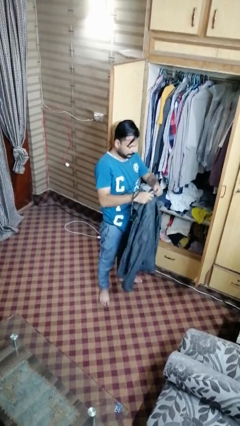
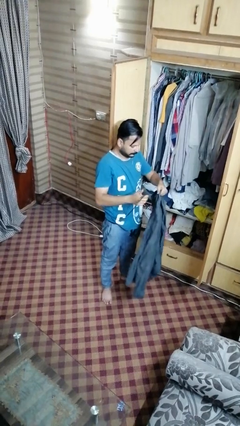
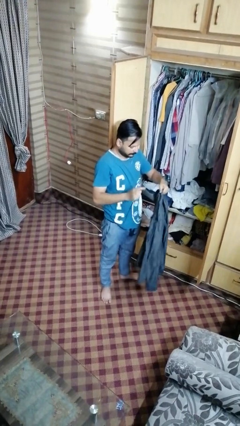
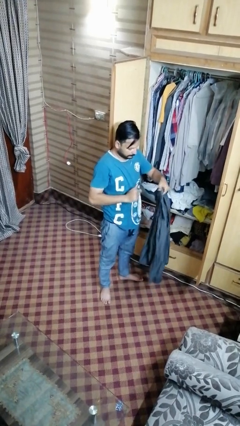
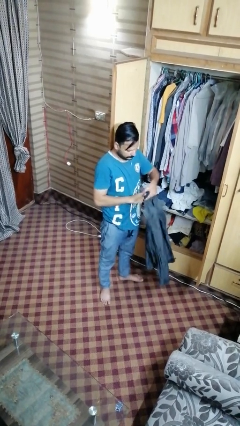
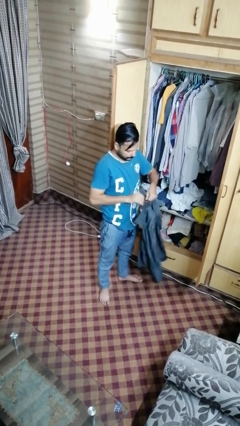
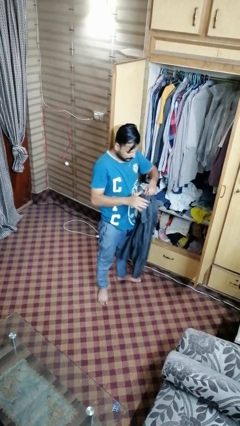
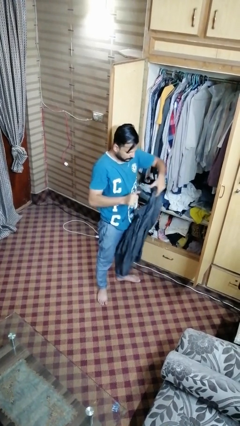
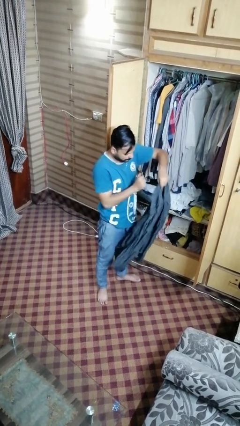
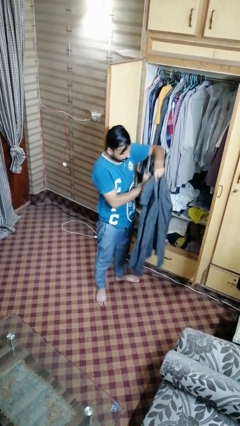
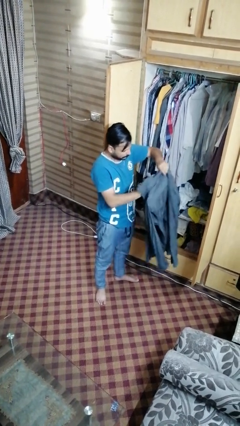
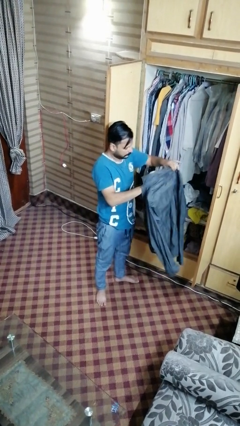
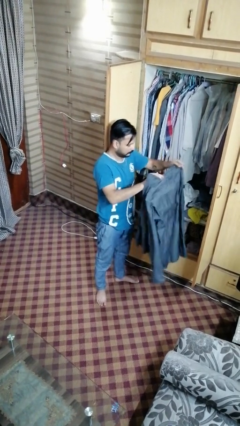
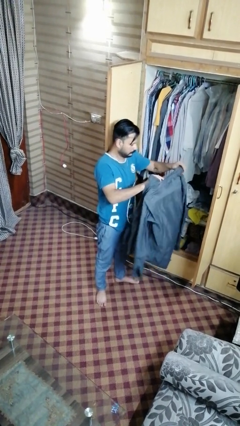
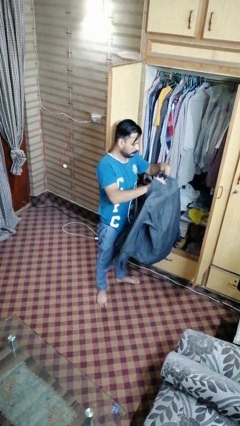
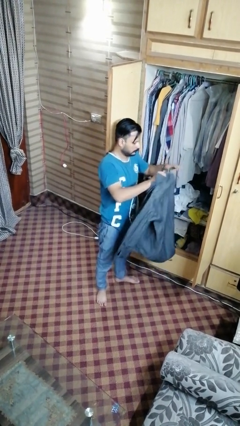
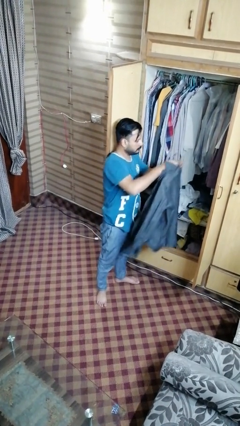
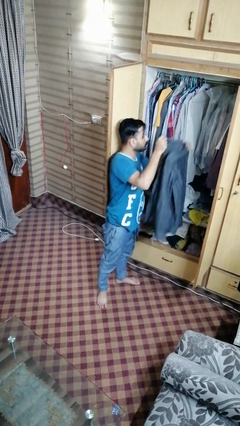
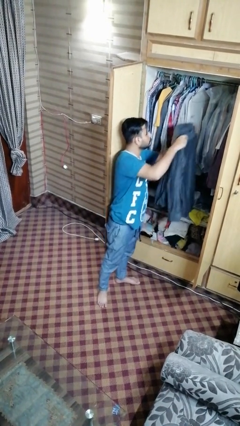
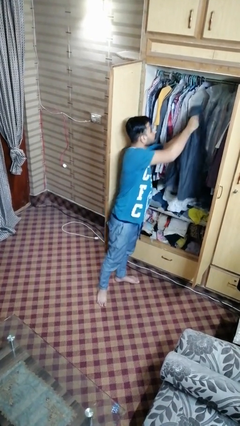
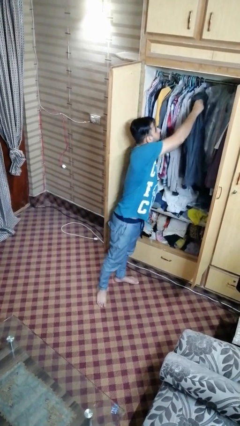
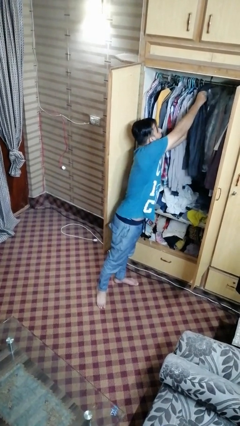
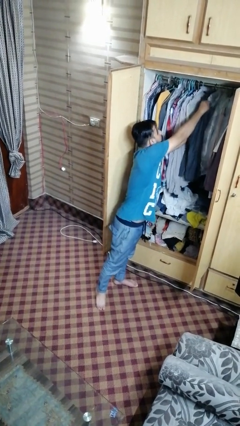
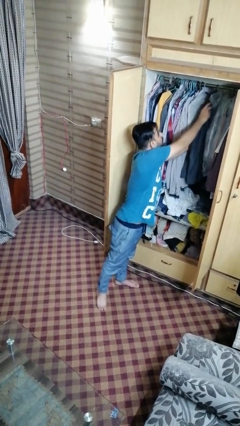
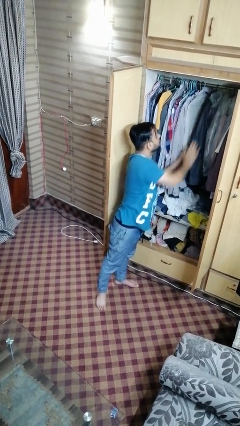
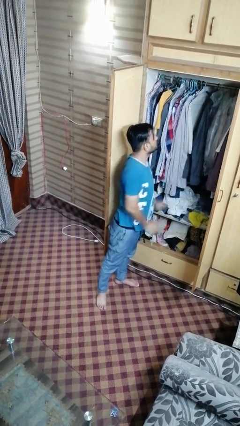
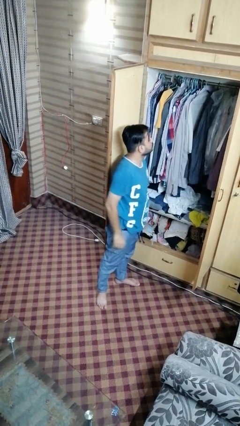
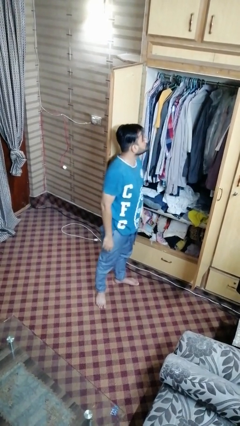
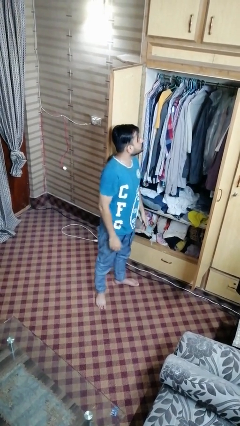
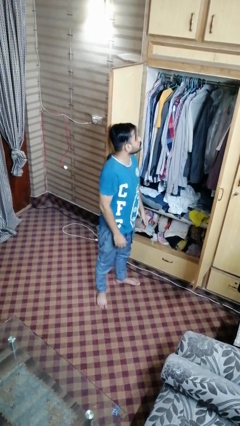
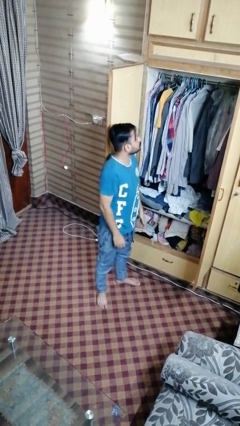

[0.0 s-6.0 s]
person puts clothes into dresser

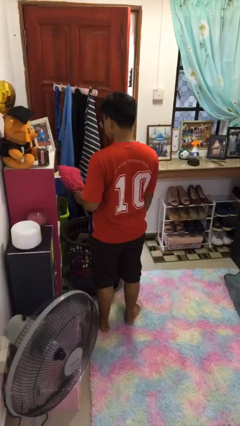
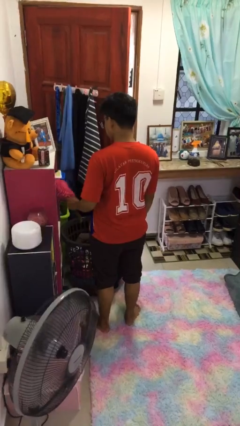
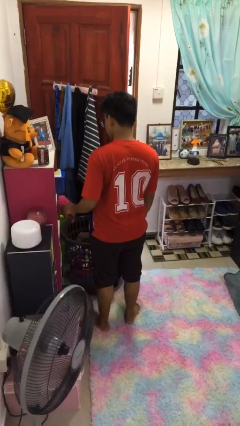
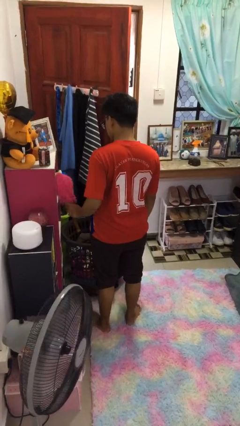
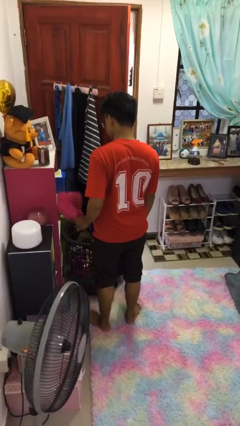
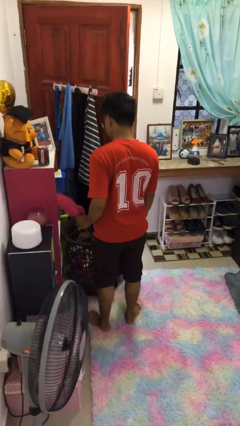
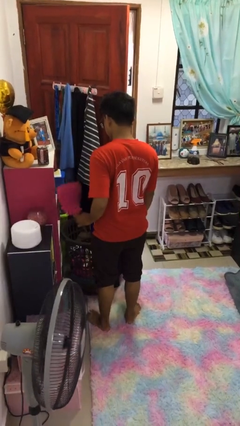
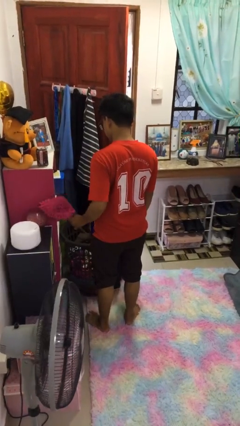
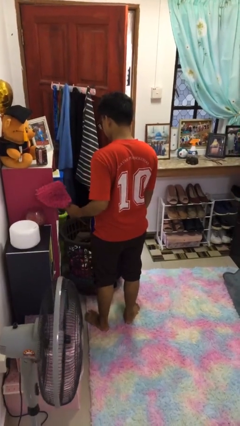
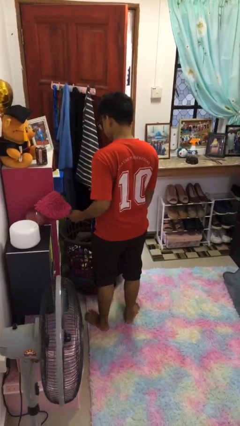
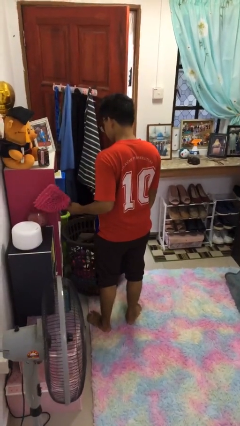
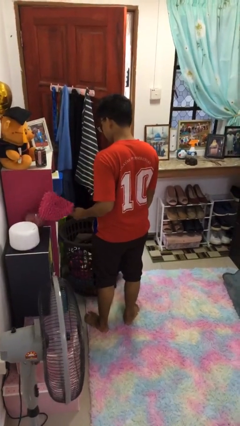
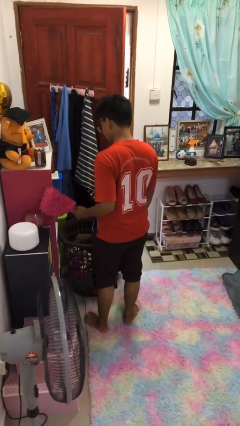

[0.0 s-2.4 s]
person dusts furniture

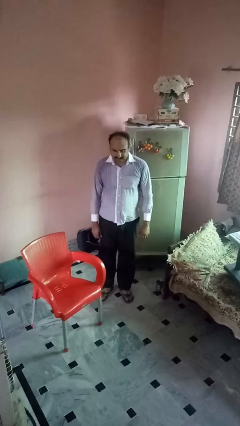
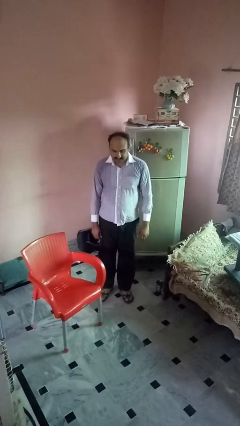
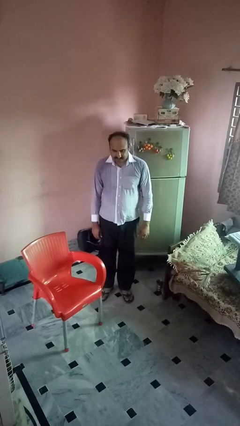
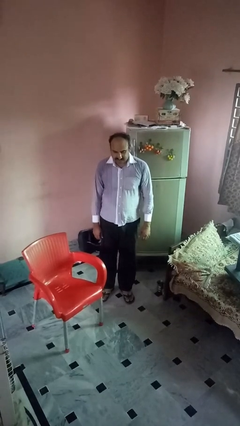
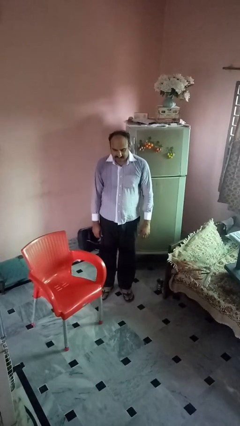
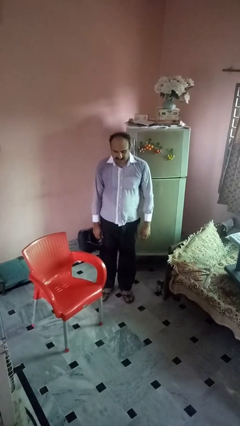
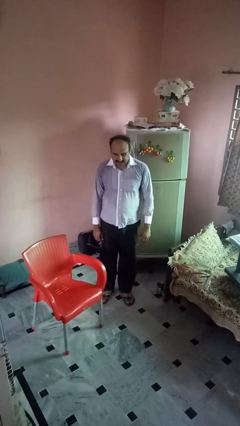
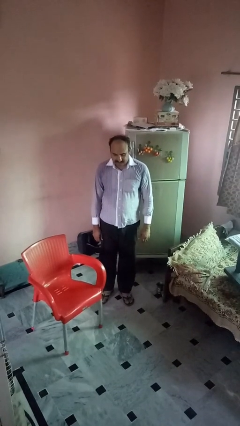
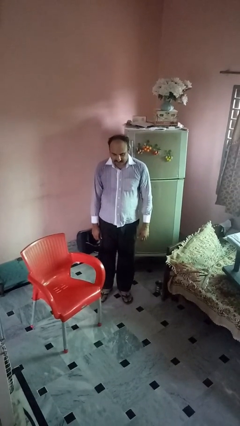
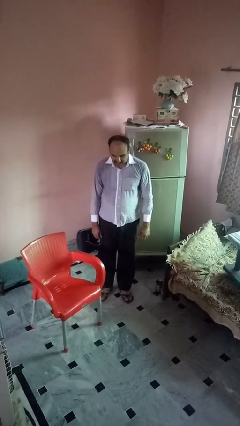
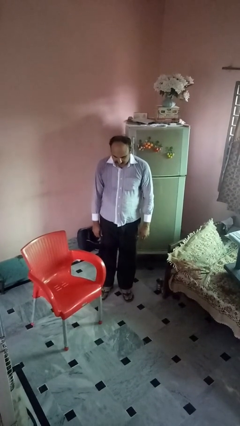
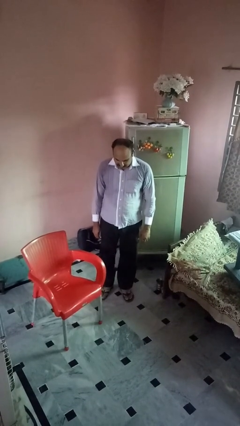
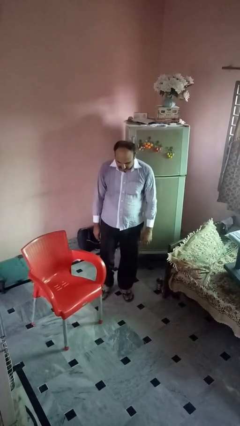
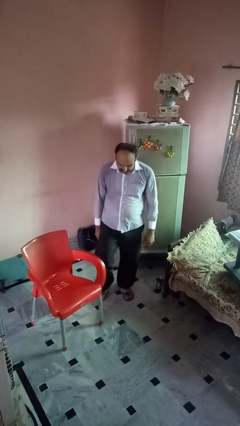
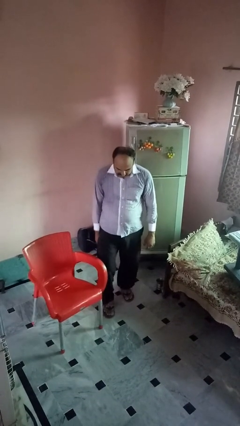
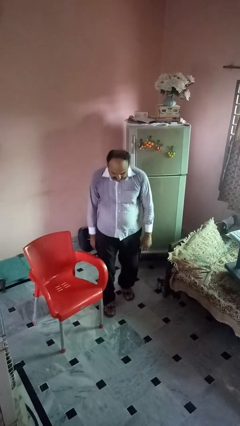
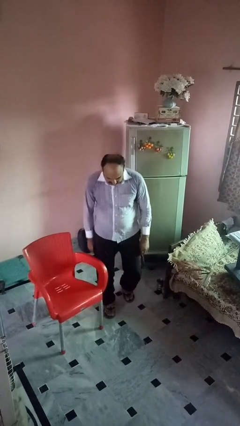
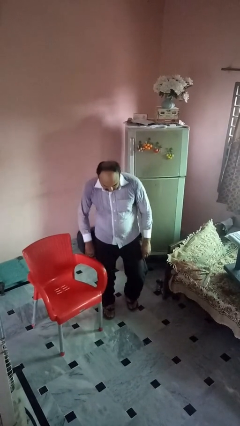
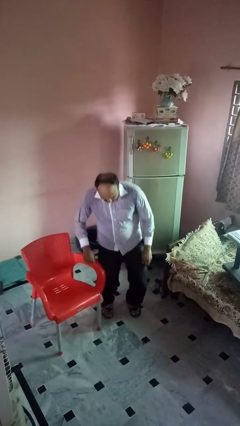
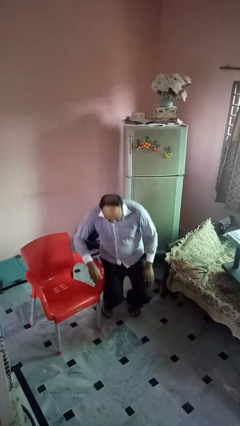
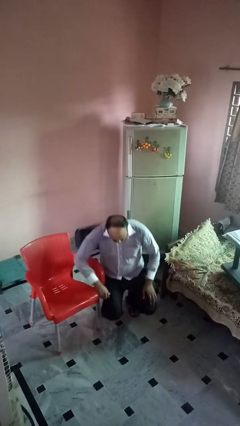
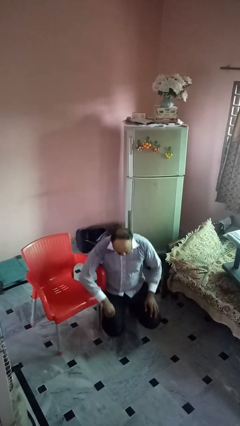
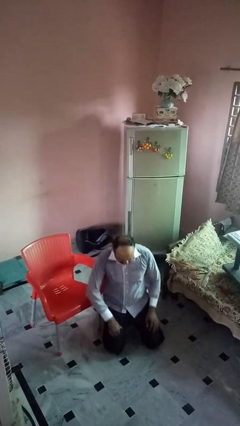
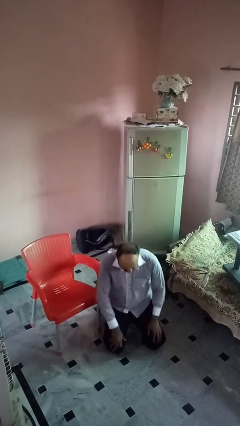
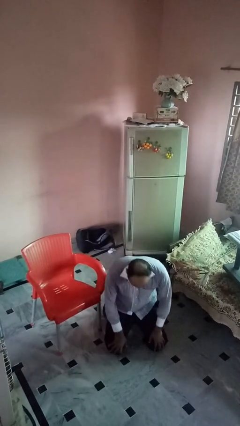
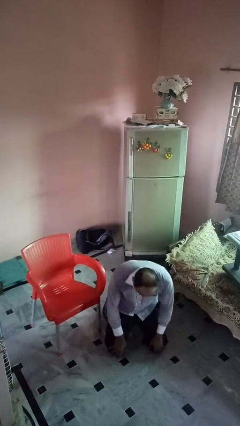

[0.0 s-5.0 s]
person trips on object on floor

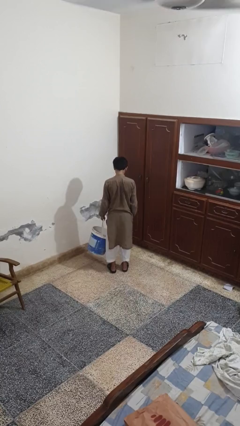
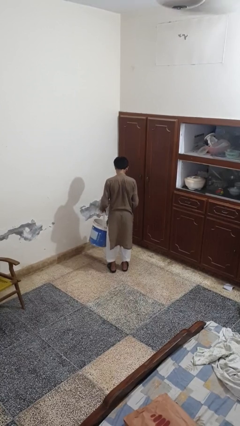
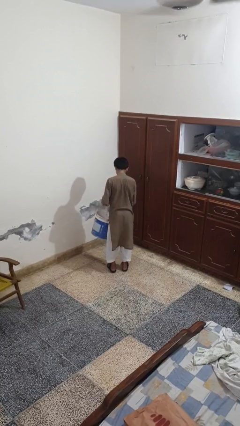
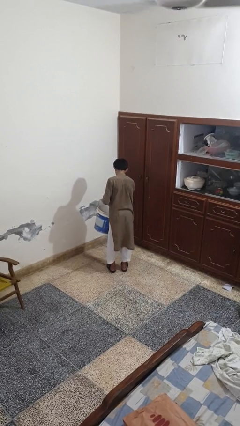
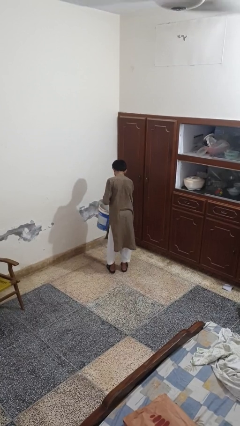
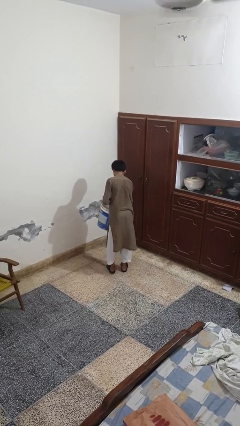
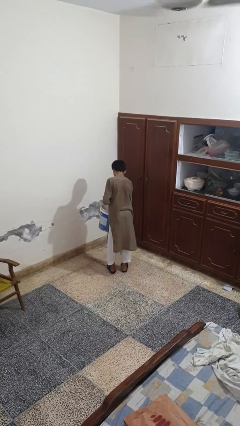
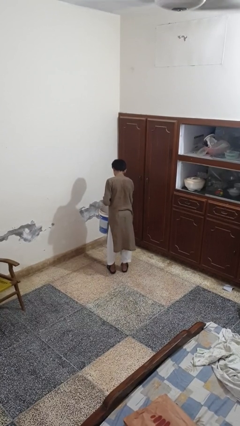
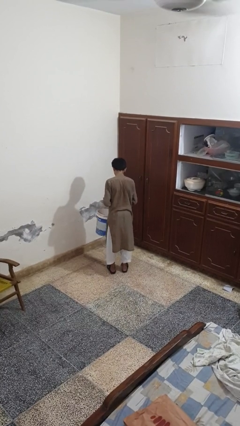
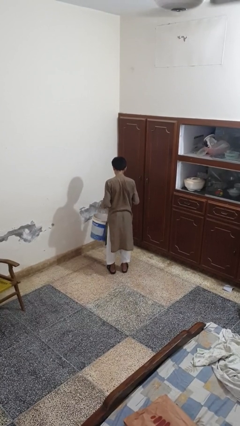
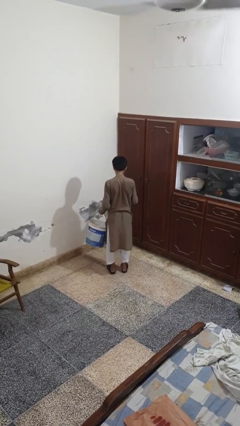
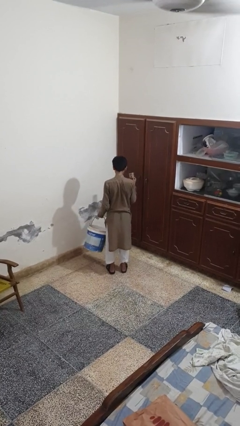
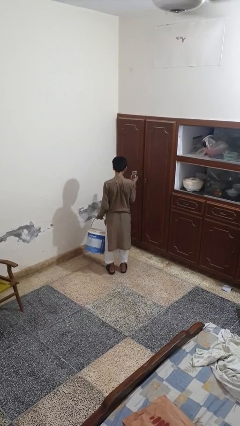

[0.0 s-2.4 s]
person takes object from basket

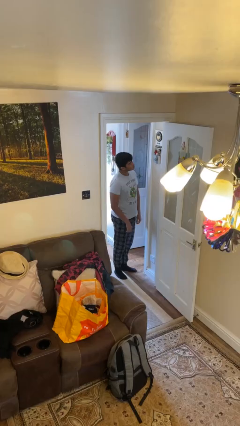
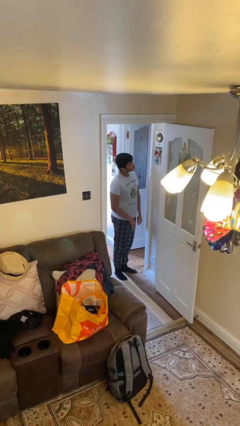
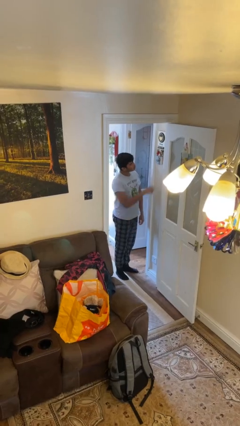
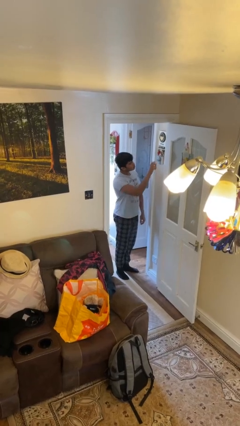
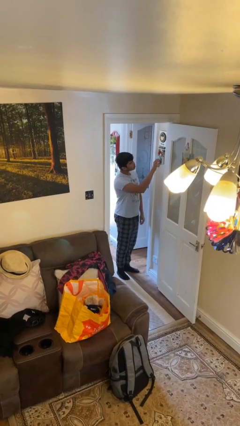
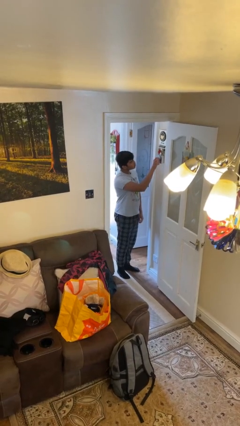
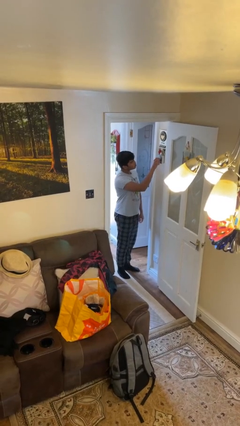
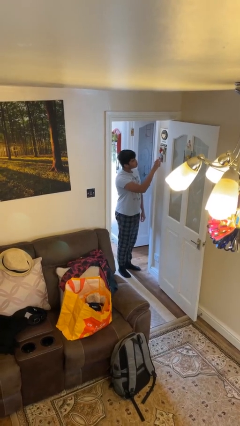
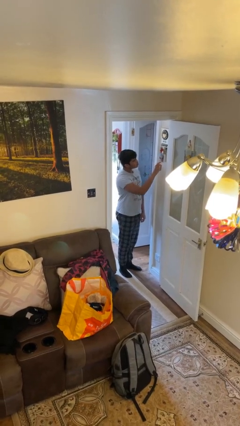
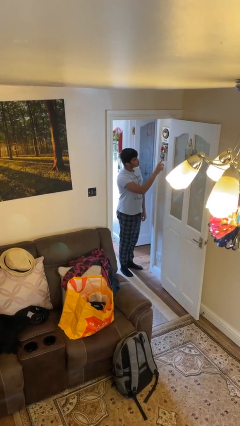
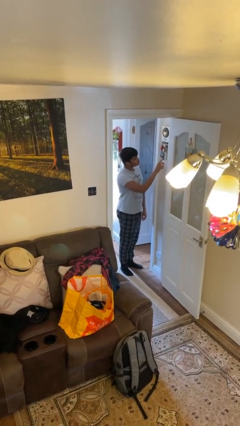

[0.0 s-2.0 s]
person adjusts thermostat
